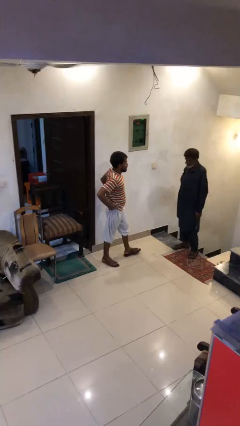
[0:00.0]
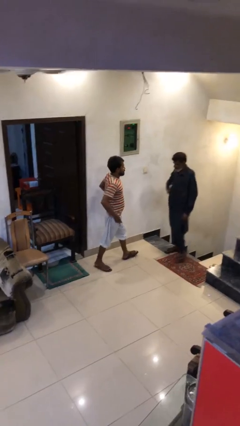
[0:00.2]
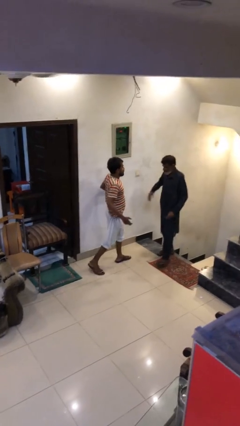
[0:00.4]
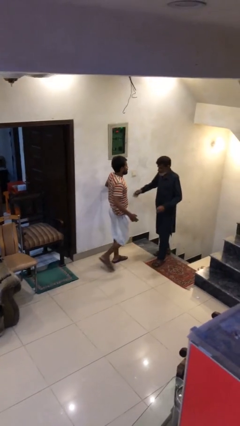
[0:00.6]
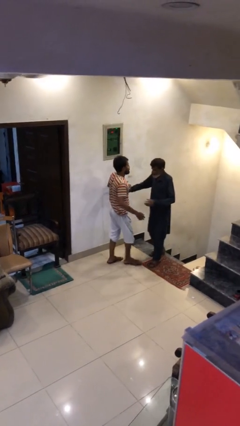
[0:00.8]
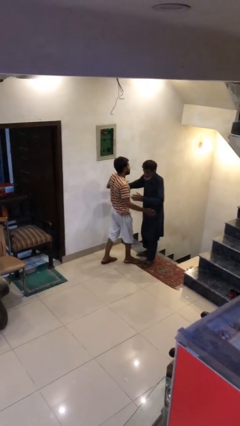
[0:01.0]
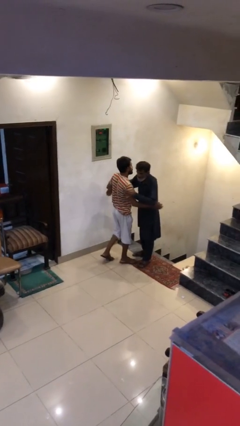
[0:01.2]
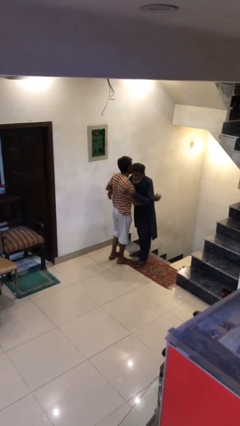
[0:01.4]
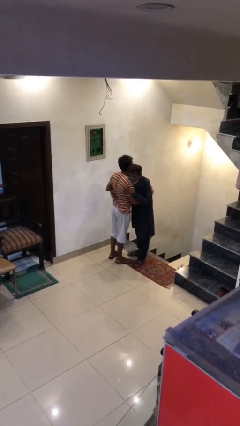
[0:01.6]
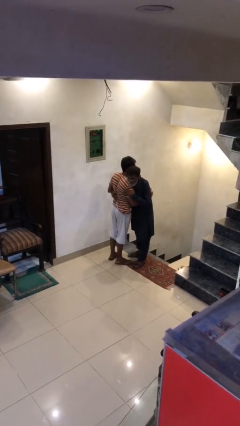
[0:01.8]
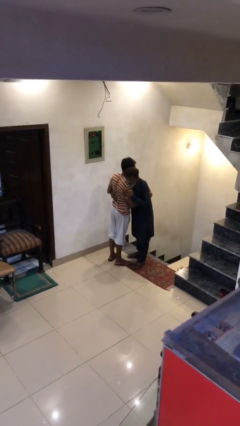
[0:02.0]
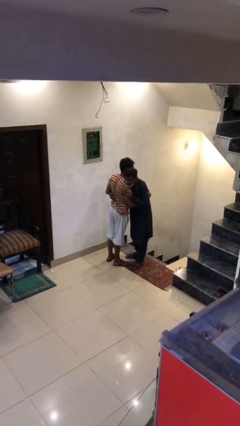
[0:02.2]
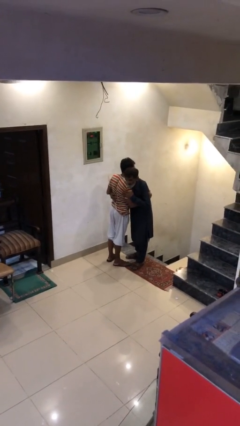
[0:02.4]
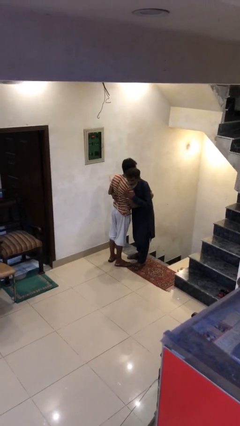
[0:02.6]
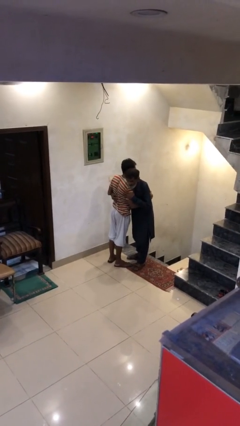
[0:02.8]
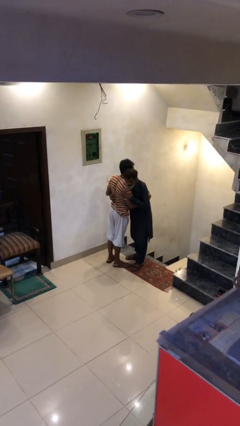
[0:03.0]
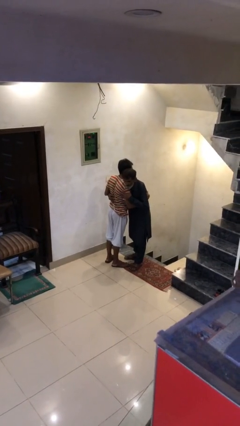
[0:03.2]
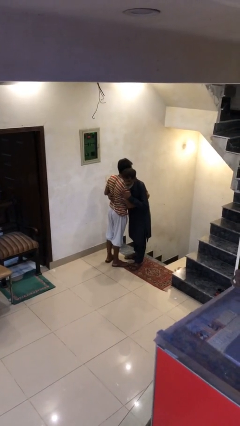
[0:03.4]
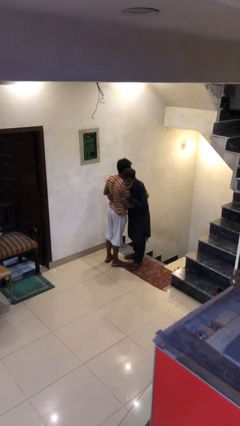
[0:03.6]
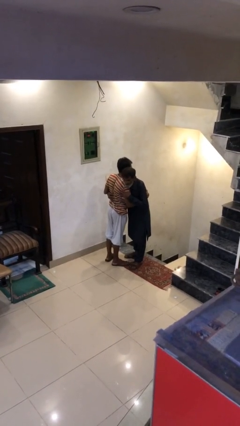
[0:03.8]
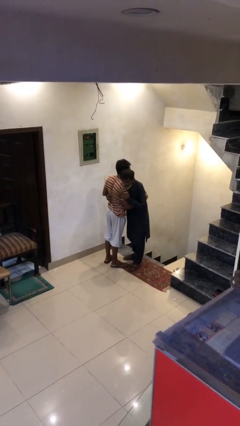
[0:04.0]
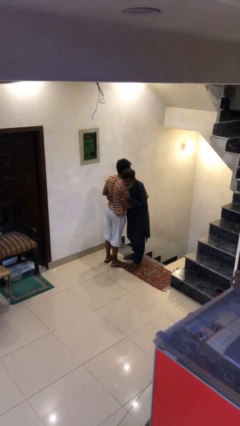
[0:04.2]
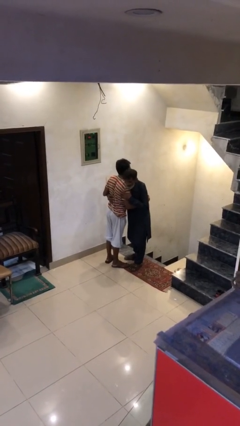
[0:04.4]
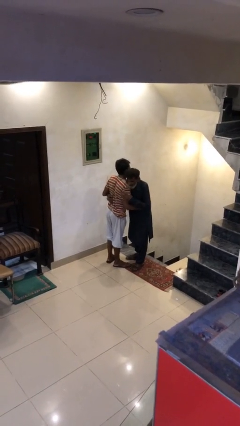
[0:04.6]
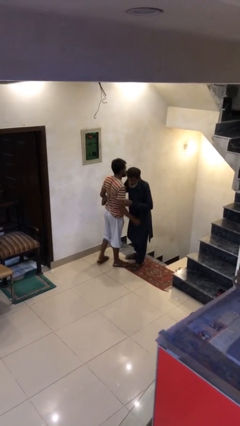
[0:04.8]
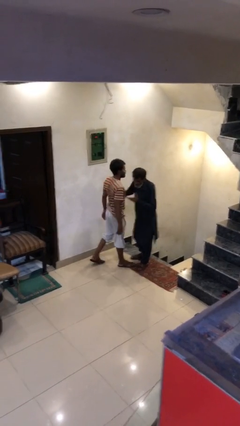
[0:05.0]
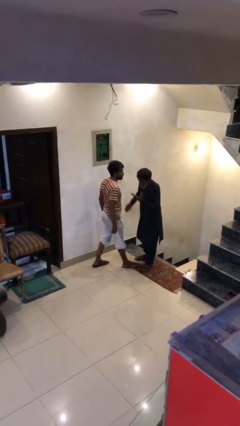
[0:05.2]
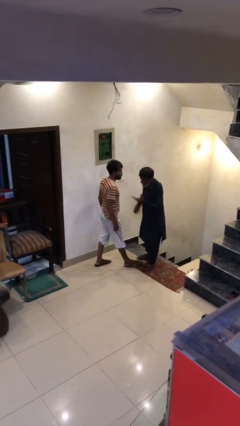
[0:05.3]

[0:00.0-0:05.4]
person embraces person

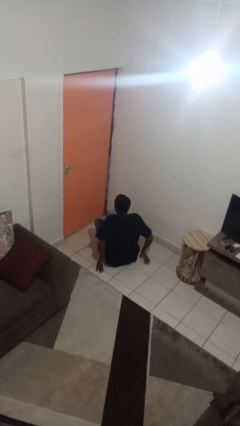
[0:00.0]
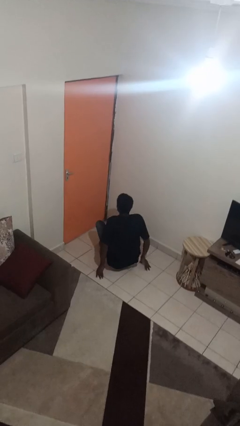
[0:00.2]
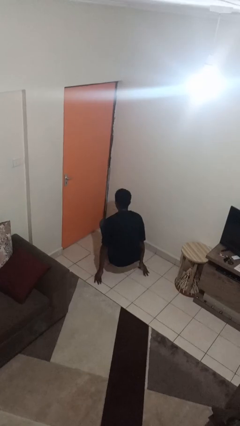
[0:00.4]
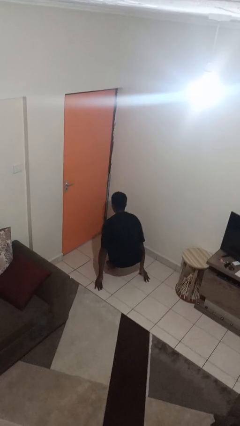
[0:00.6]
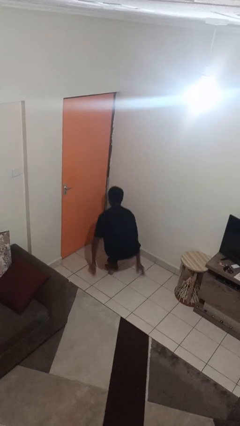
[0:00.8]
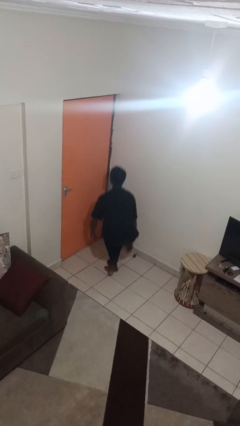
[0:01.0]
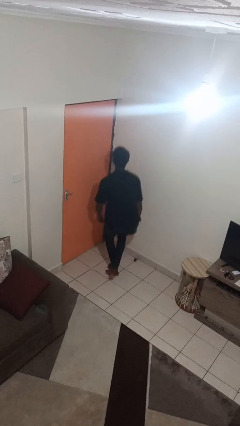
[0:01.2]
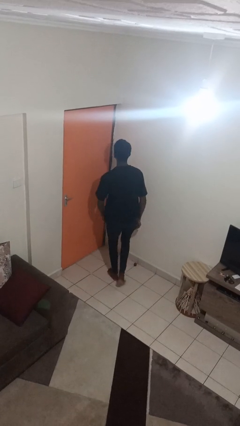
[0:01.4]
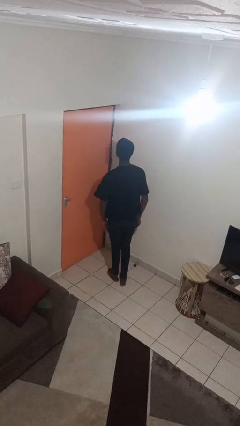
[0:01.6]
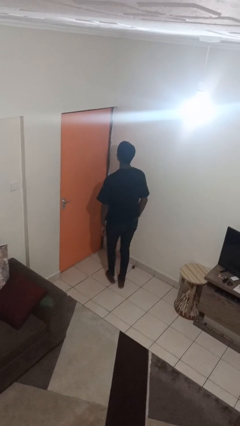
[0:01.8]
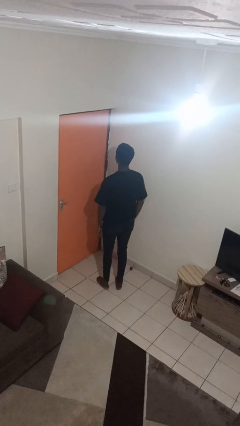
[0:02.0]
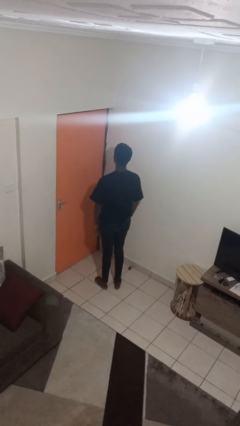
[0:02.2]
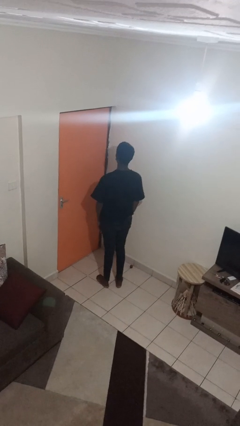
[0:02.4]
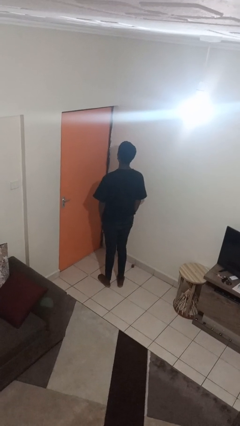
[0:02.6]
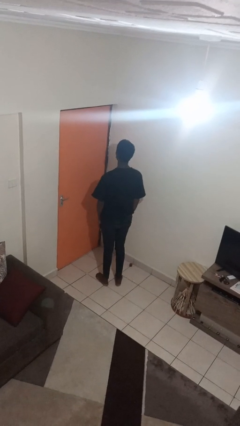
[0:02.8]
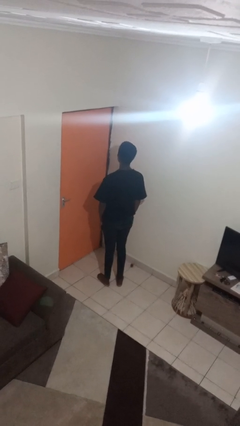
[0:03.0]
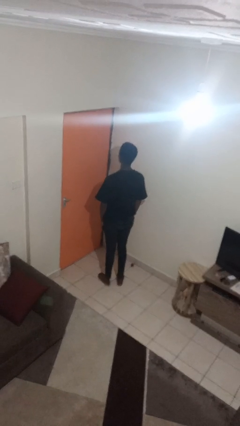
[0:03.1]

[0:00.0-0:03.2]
person stands up from floor

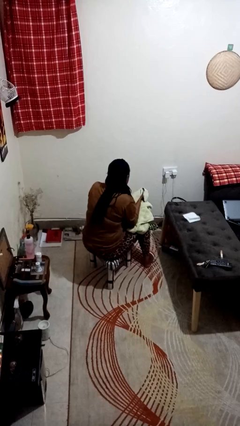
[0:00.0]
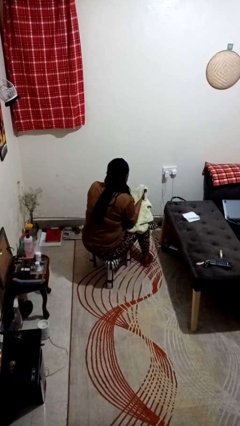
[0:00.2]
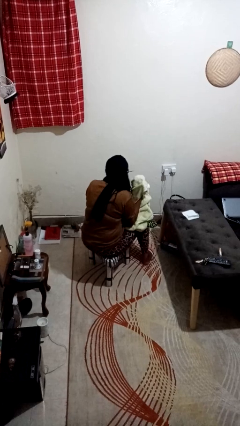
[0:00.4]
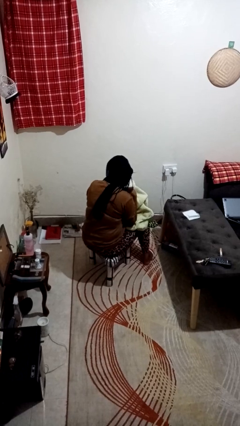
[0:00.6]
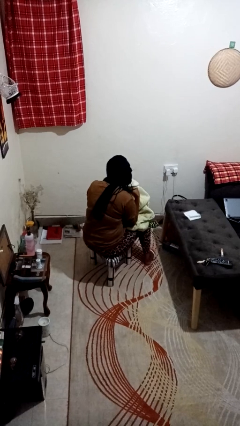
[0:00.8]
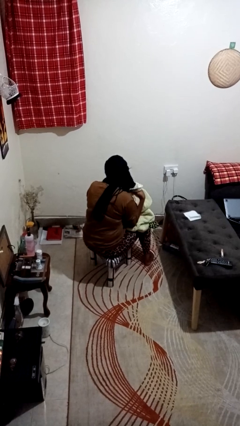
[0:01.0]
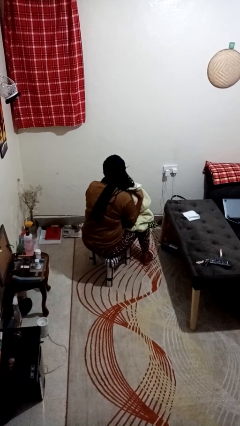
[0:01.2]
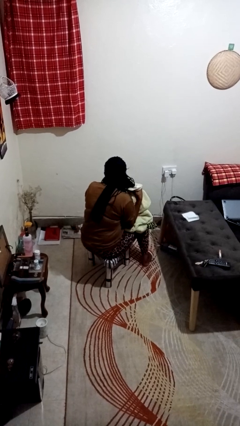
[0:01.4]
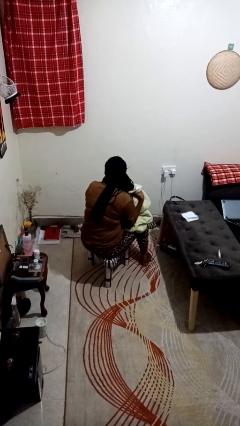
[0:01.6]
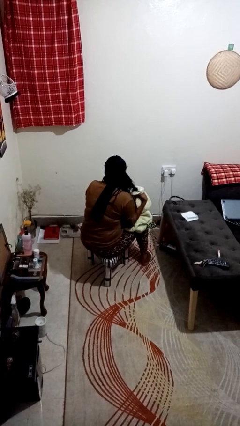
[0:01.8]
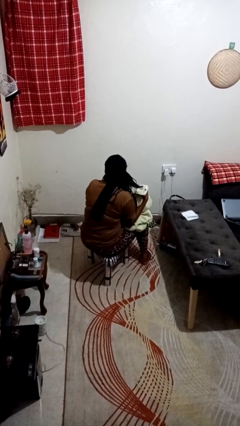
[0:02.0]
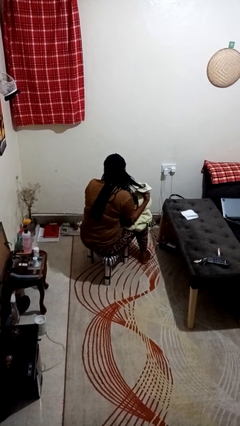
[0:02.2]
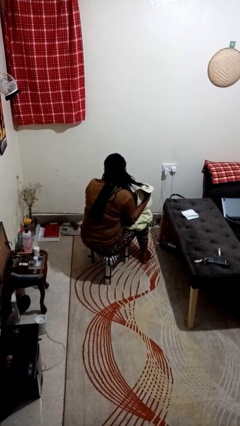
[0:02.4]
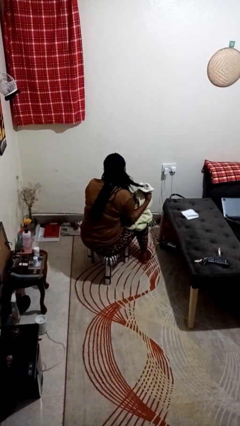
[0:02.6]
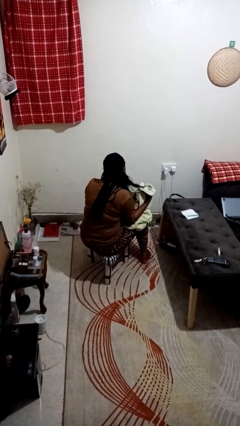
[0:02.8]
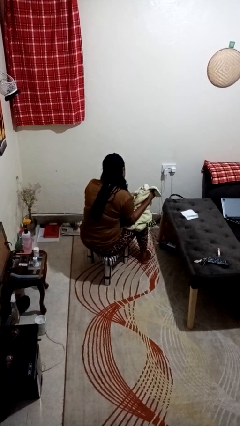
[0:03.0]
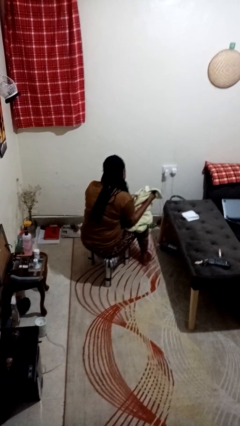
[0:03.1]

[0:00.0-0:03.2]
person dries hair with towel

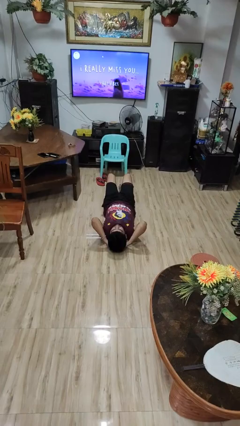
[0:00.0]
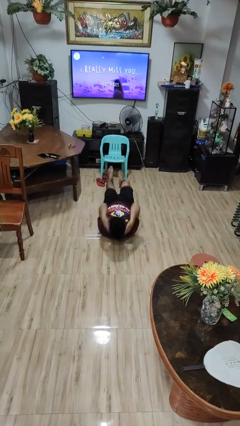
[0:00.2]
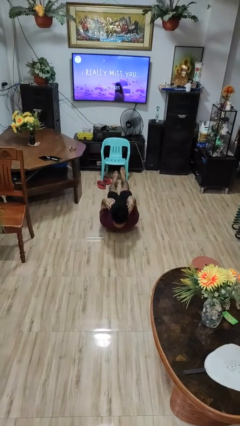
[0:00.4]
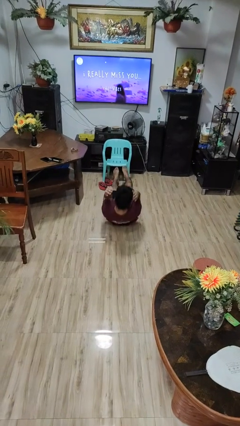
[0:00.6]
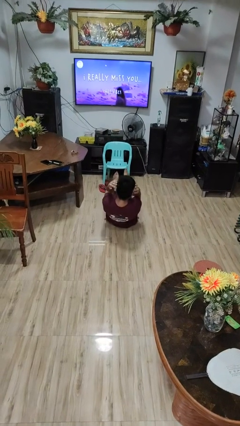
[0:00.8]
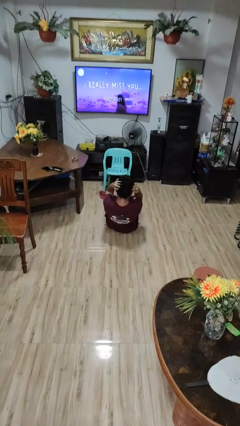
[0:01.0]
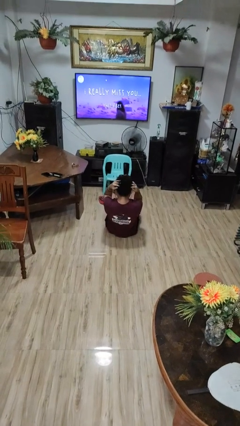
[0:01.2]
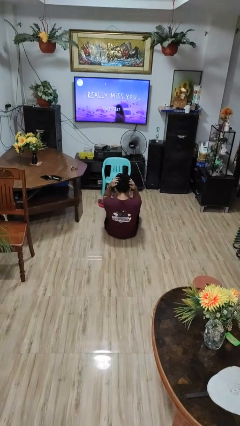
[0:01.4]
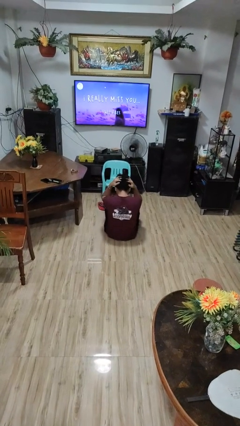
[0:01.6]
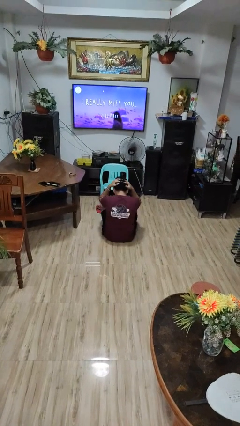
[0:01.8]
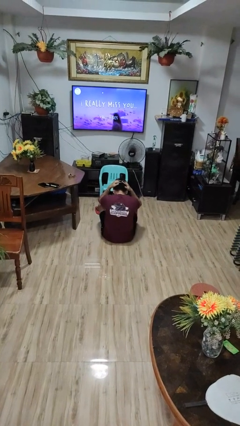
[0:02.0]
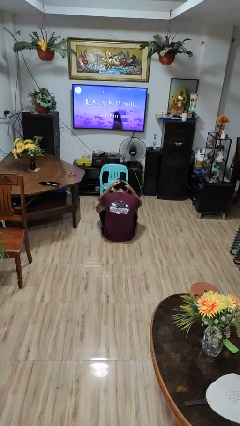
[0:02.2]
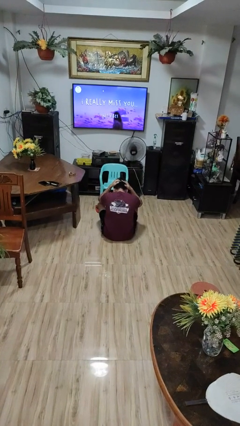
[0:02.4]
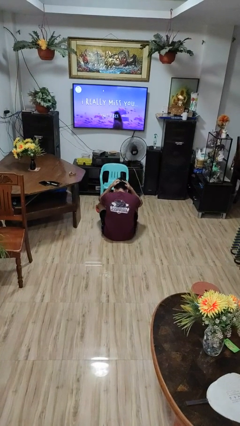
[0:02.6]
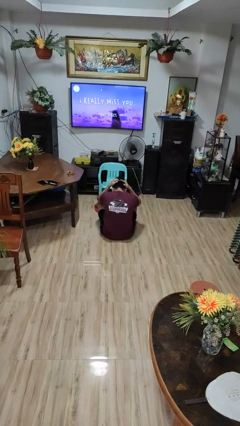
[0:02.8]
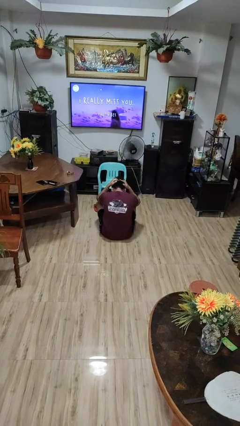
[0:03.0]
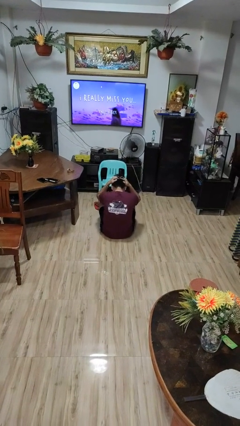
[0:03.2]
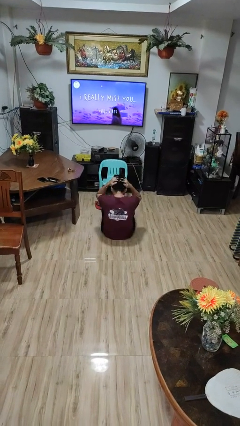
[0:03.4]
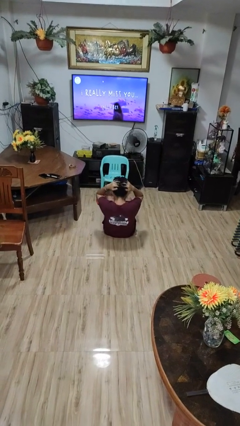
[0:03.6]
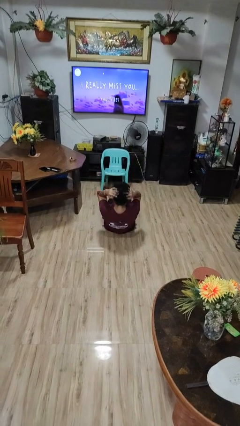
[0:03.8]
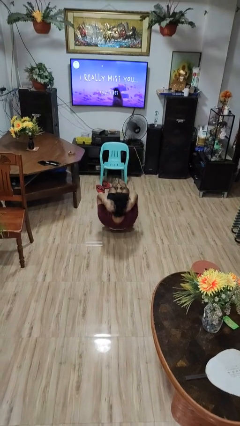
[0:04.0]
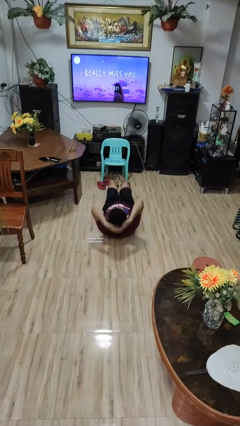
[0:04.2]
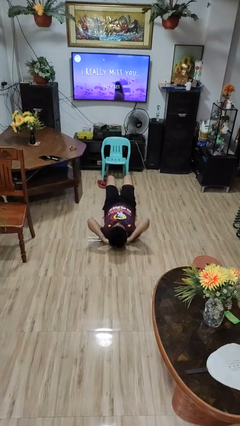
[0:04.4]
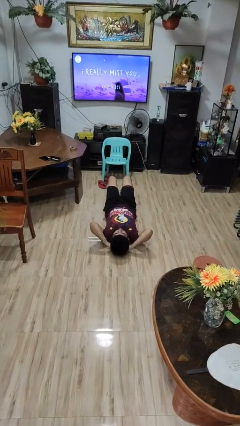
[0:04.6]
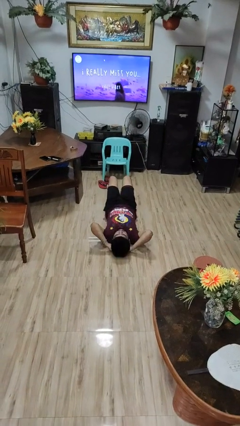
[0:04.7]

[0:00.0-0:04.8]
person exercises with situp

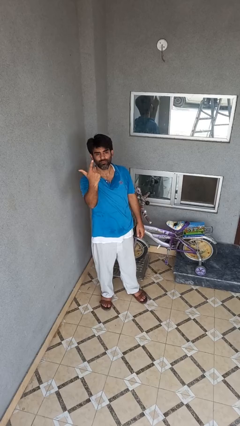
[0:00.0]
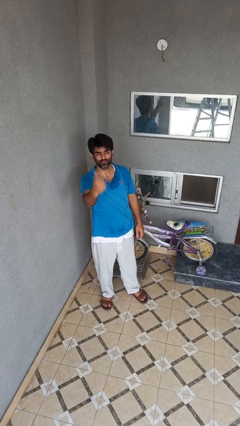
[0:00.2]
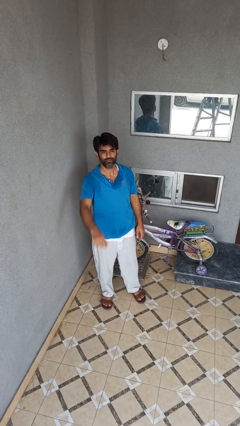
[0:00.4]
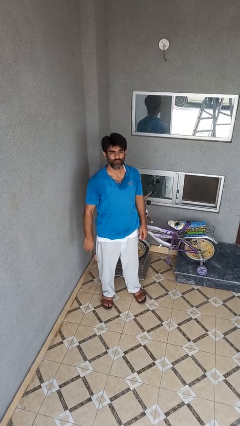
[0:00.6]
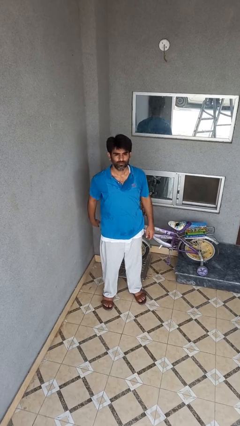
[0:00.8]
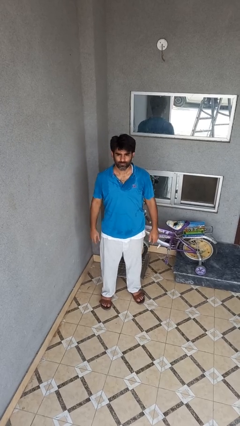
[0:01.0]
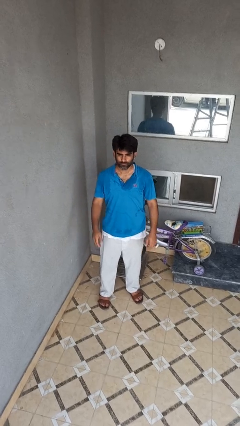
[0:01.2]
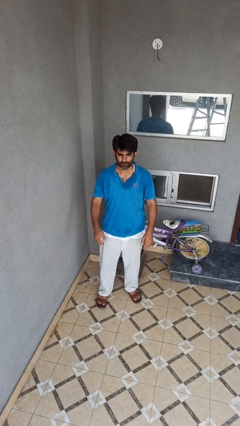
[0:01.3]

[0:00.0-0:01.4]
person gestures lower hand
